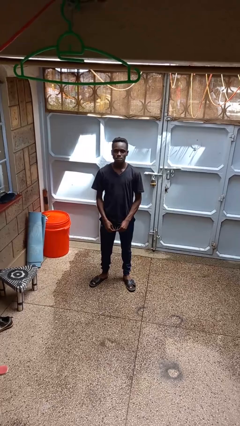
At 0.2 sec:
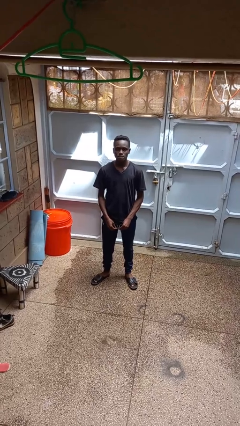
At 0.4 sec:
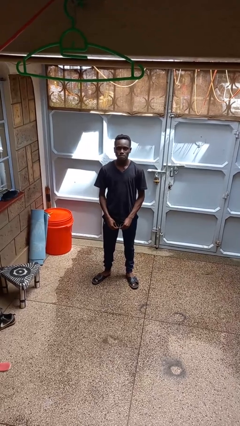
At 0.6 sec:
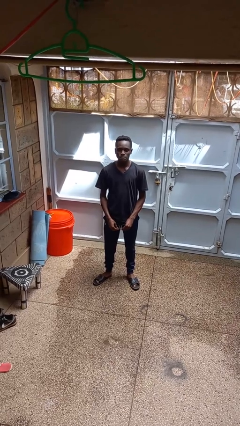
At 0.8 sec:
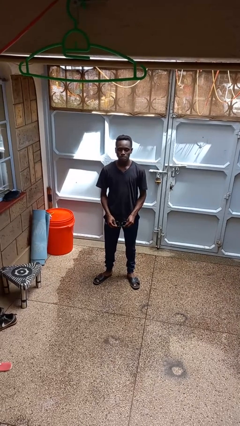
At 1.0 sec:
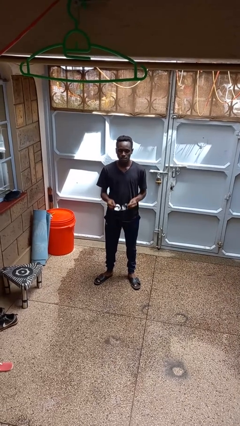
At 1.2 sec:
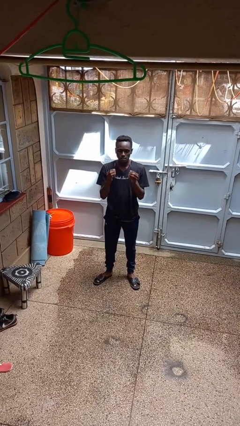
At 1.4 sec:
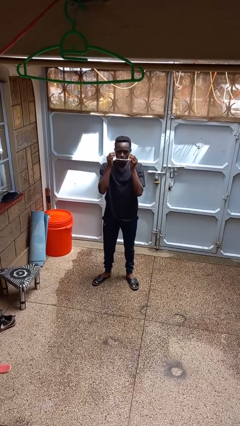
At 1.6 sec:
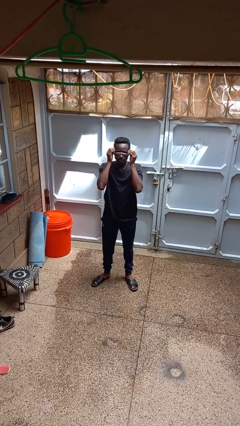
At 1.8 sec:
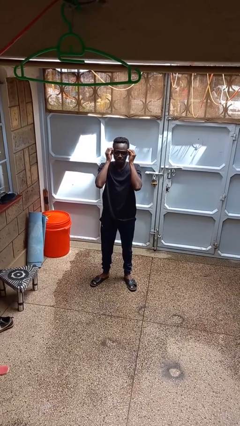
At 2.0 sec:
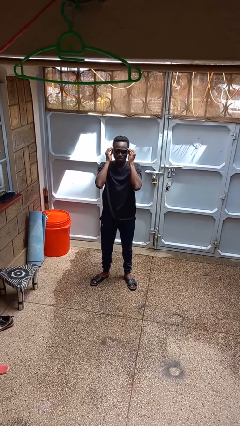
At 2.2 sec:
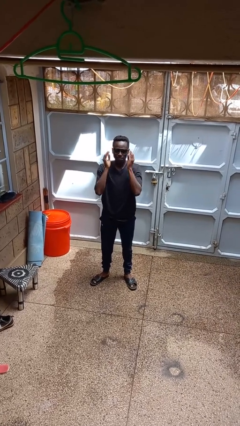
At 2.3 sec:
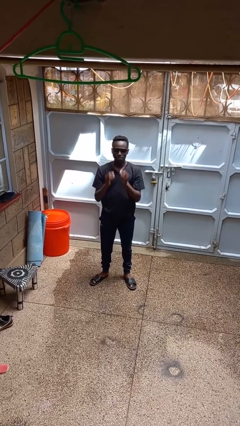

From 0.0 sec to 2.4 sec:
person puts on sunglasses

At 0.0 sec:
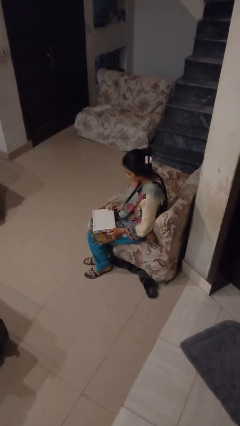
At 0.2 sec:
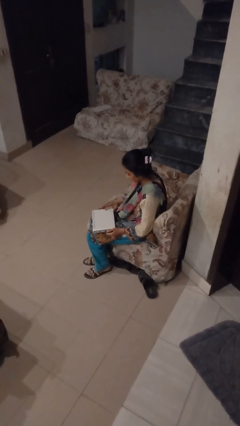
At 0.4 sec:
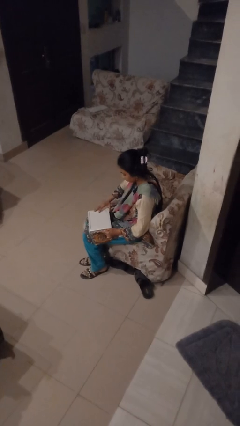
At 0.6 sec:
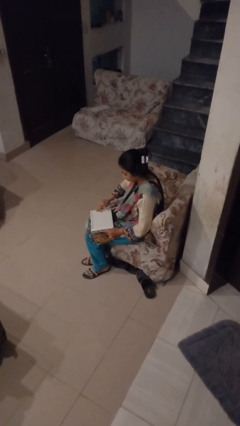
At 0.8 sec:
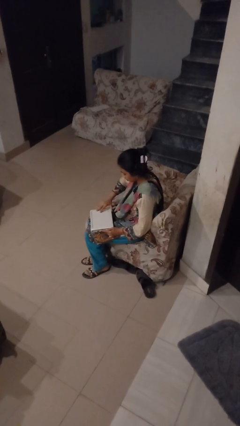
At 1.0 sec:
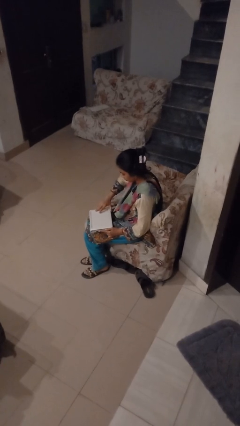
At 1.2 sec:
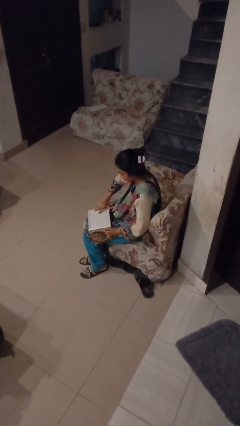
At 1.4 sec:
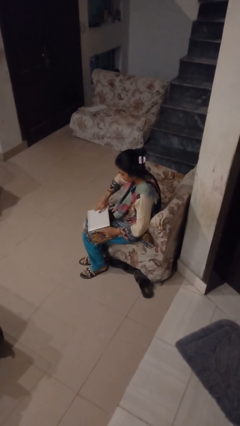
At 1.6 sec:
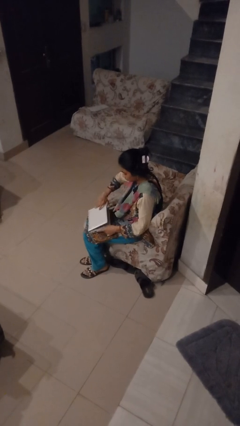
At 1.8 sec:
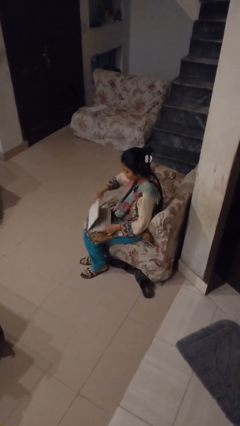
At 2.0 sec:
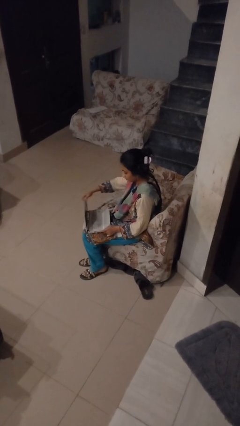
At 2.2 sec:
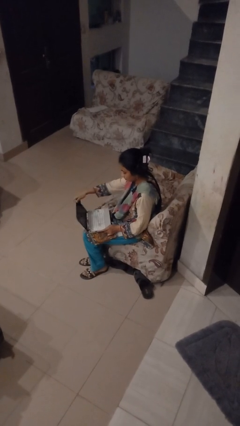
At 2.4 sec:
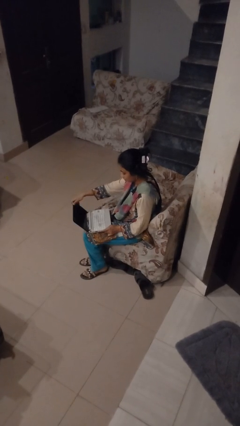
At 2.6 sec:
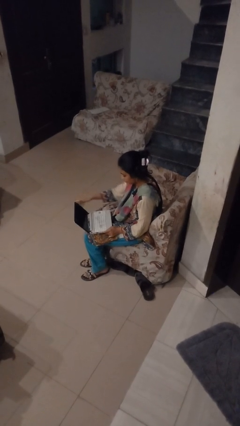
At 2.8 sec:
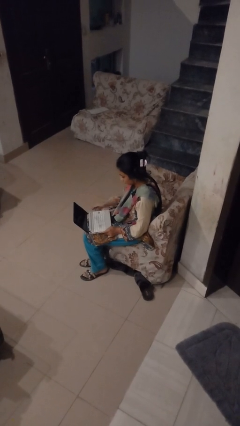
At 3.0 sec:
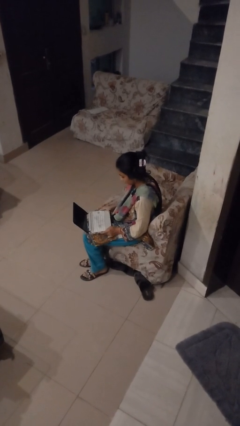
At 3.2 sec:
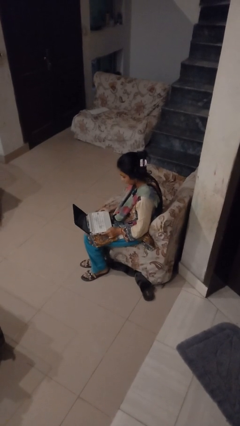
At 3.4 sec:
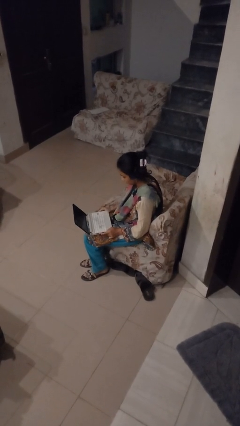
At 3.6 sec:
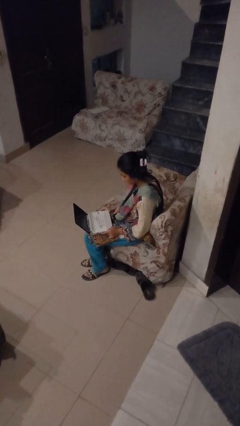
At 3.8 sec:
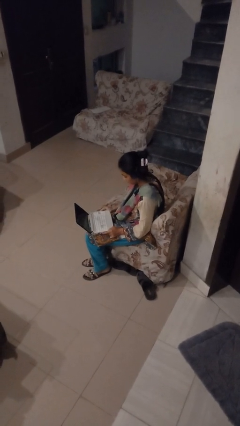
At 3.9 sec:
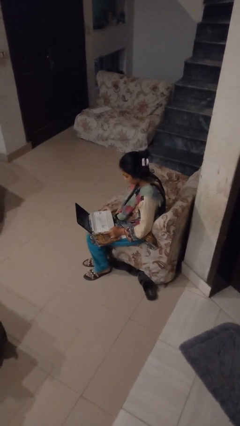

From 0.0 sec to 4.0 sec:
person opens laptop

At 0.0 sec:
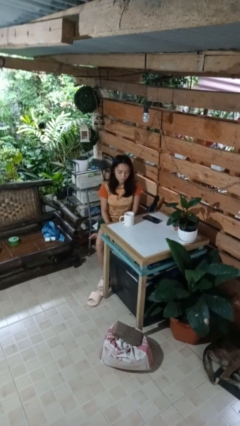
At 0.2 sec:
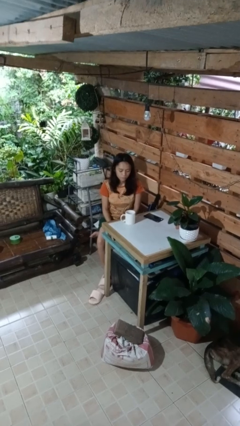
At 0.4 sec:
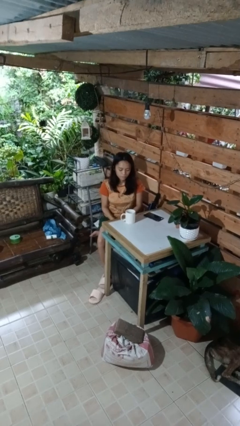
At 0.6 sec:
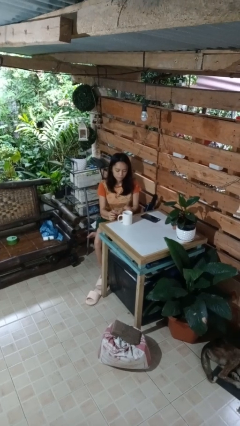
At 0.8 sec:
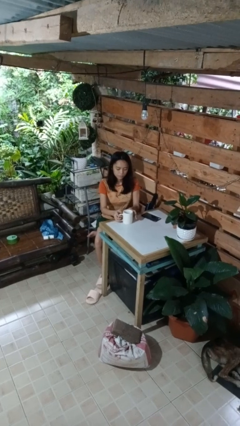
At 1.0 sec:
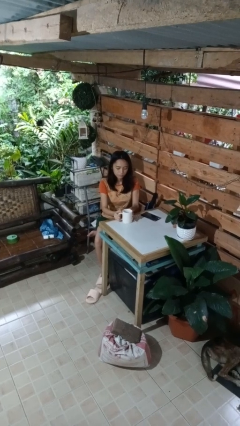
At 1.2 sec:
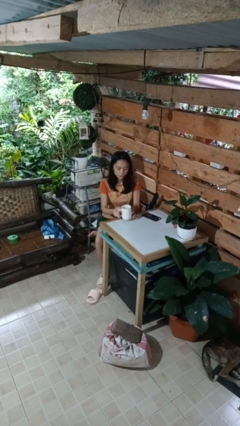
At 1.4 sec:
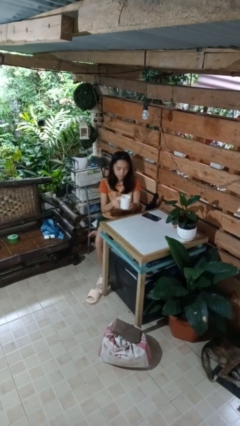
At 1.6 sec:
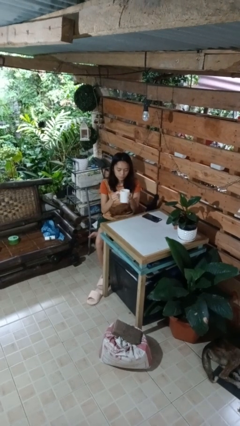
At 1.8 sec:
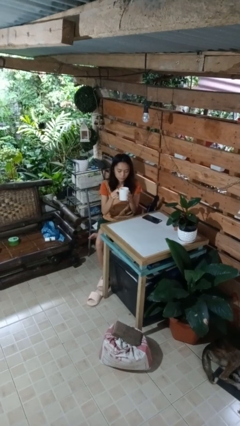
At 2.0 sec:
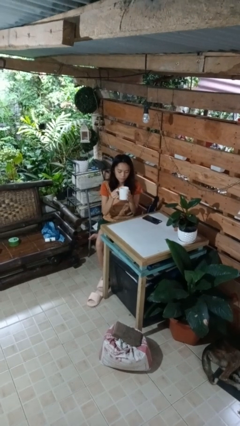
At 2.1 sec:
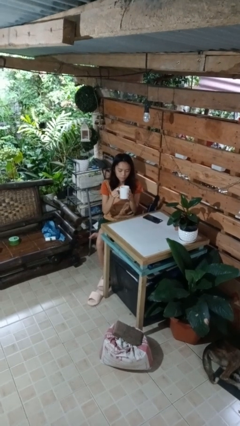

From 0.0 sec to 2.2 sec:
person picks up object from table

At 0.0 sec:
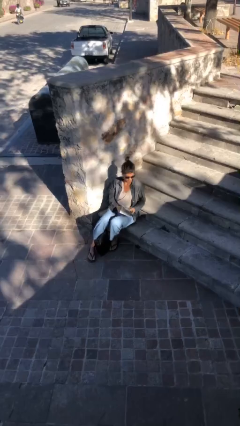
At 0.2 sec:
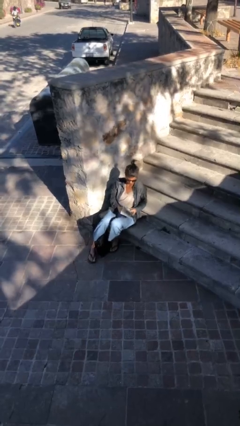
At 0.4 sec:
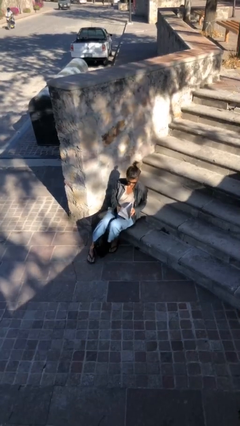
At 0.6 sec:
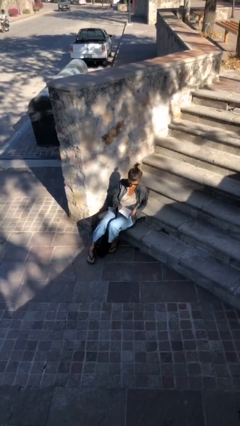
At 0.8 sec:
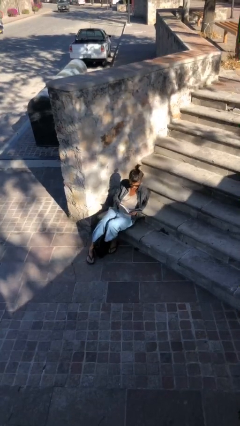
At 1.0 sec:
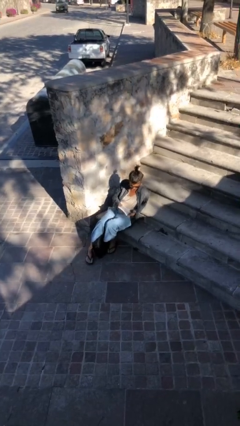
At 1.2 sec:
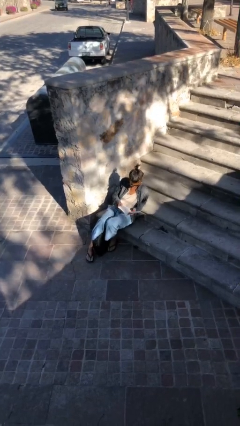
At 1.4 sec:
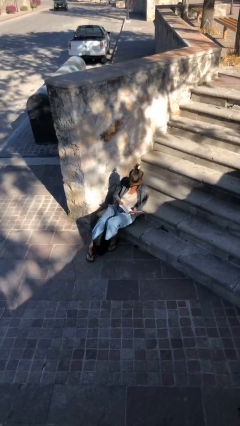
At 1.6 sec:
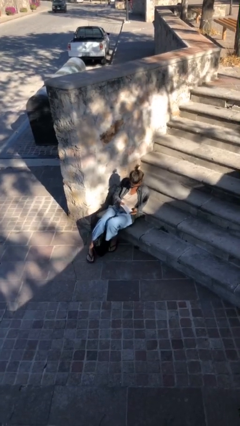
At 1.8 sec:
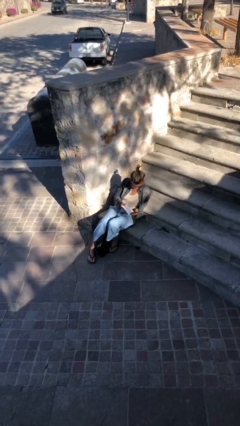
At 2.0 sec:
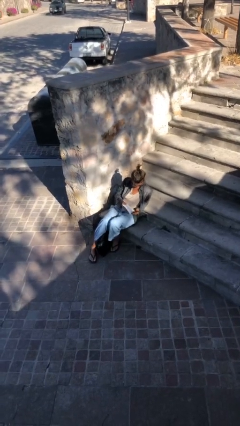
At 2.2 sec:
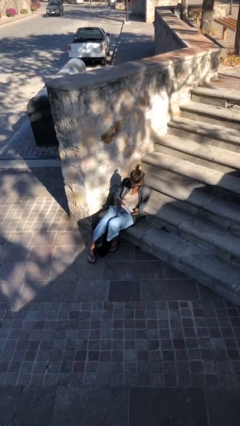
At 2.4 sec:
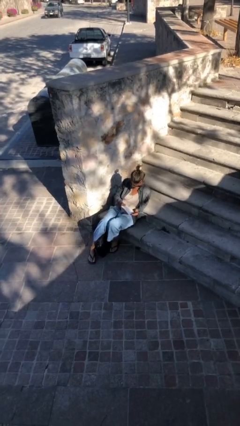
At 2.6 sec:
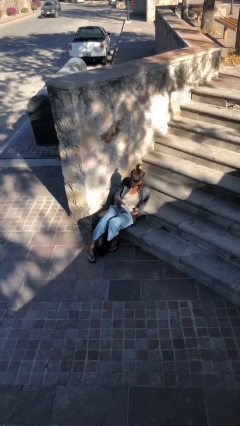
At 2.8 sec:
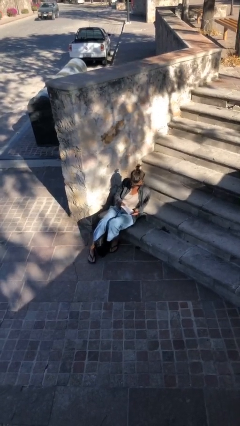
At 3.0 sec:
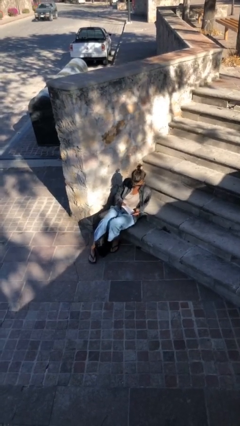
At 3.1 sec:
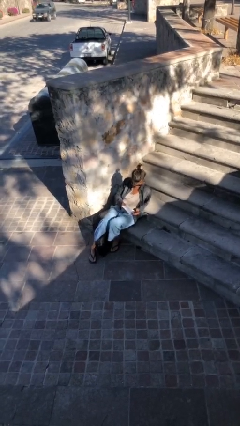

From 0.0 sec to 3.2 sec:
person reads document

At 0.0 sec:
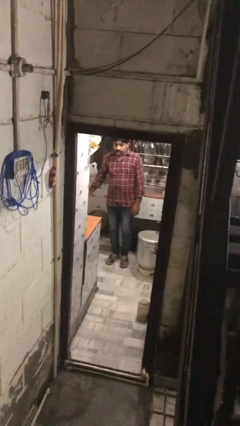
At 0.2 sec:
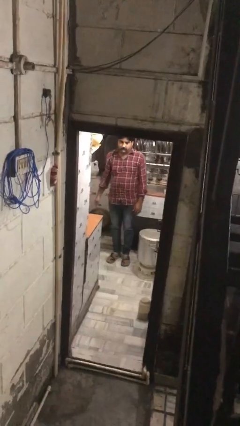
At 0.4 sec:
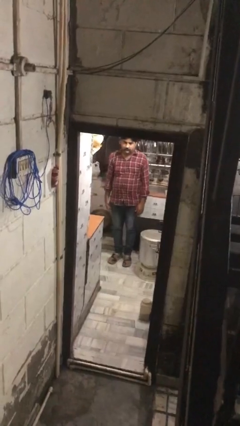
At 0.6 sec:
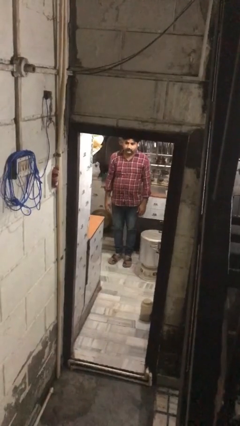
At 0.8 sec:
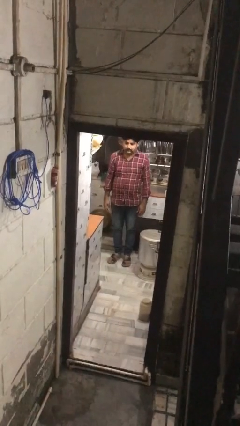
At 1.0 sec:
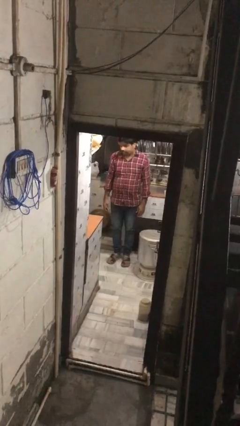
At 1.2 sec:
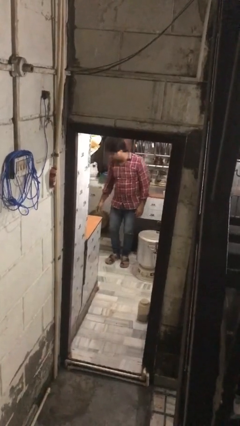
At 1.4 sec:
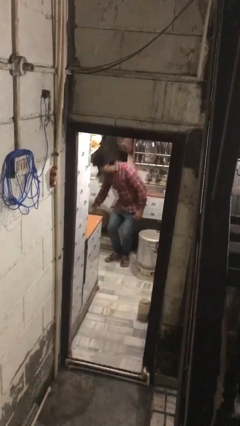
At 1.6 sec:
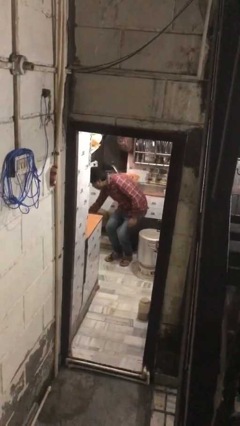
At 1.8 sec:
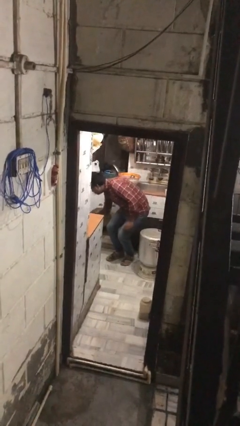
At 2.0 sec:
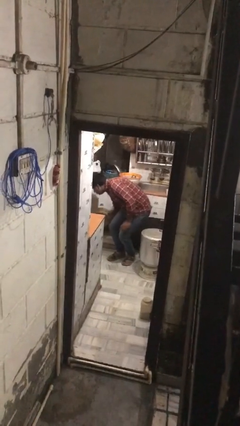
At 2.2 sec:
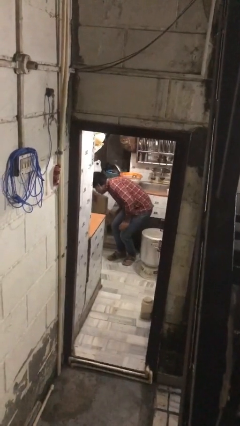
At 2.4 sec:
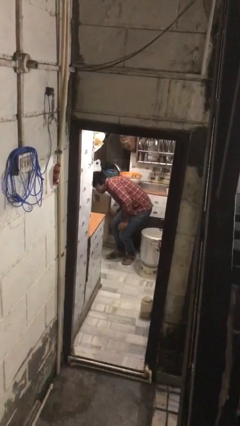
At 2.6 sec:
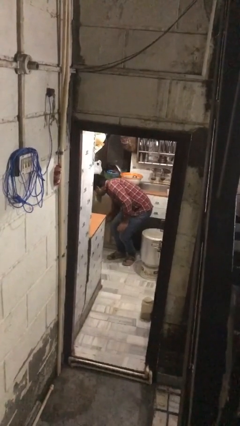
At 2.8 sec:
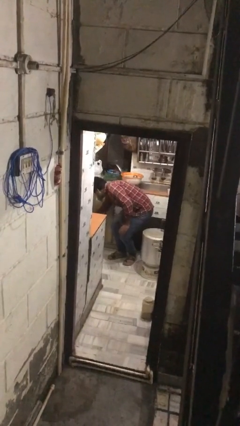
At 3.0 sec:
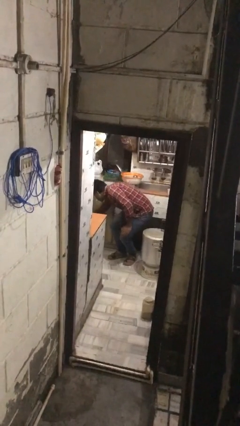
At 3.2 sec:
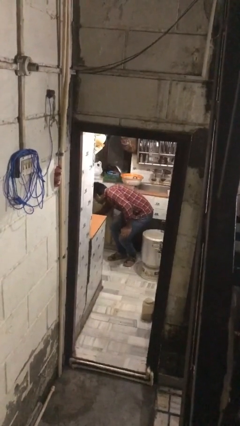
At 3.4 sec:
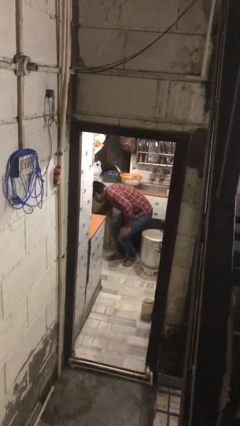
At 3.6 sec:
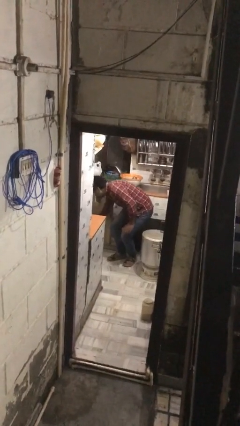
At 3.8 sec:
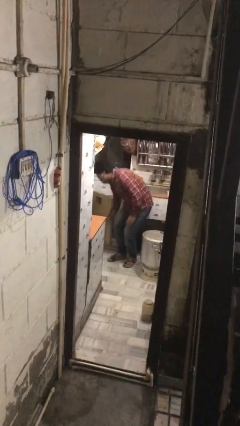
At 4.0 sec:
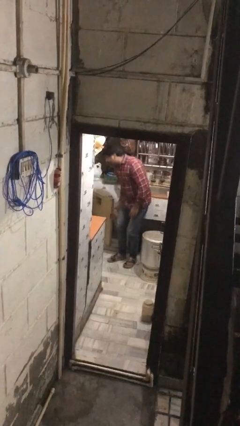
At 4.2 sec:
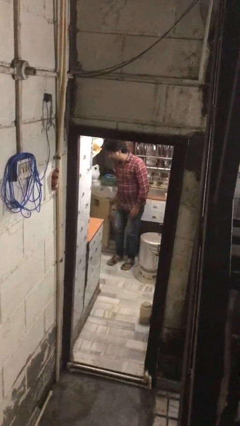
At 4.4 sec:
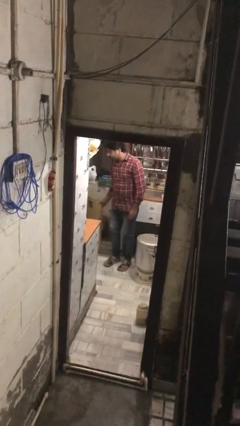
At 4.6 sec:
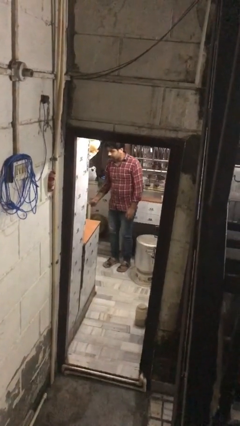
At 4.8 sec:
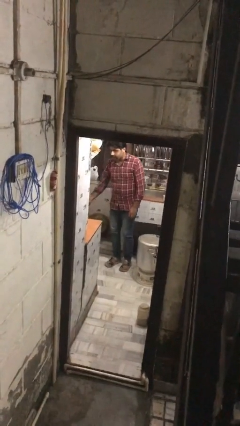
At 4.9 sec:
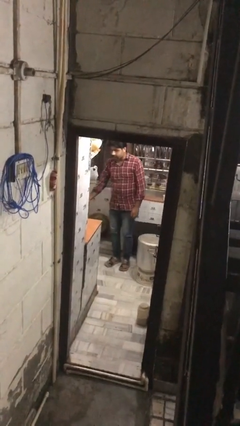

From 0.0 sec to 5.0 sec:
person searches in kitchen drawer

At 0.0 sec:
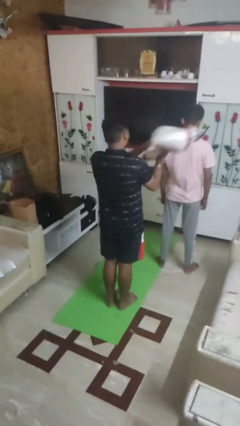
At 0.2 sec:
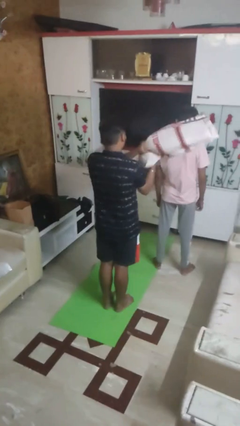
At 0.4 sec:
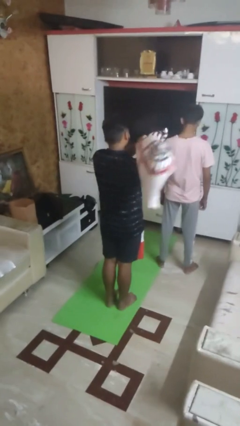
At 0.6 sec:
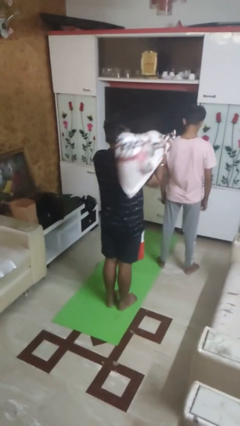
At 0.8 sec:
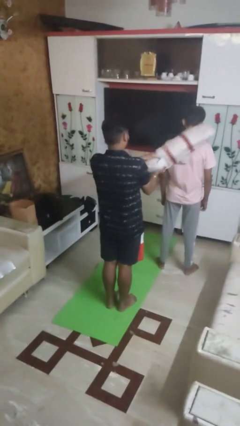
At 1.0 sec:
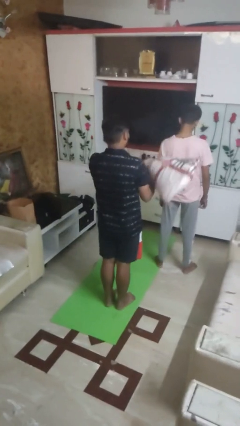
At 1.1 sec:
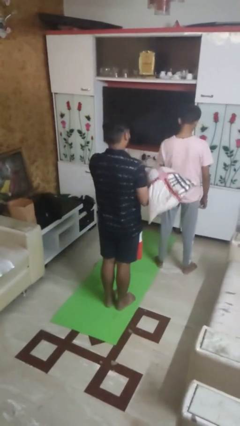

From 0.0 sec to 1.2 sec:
person hits person with pillow
